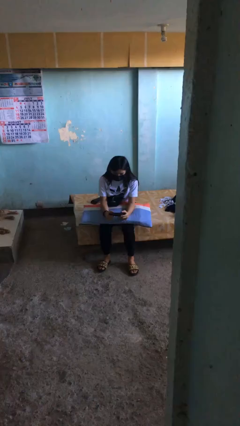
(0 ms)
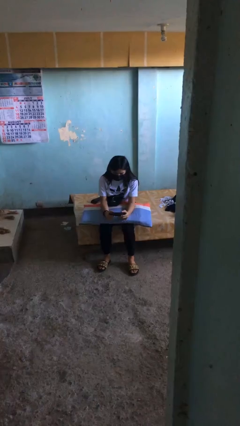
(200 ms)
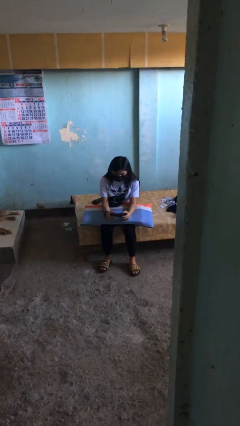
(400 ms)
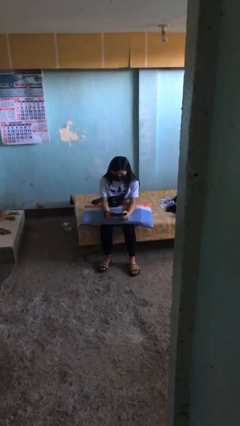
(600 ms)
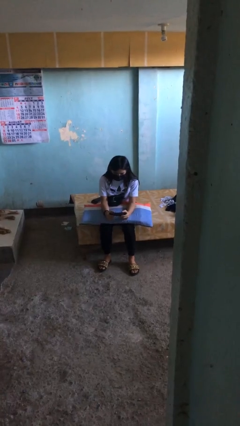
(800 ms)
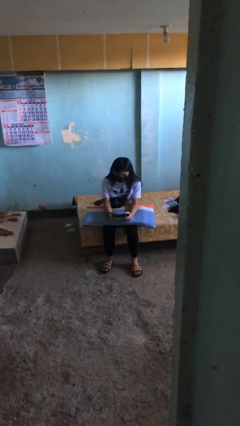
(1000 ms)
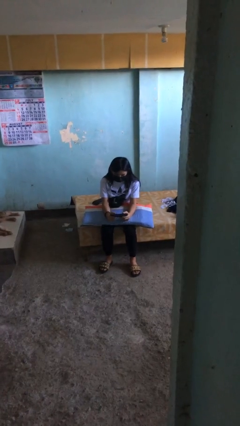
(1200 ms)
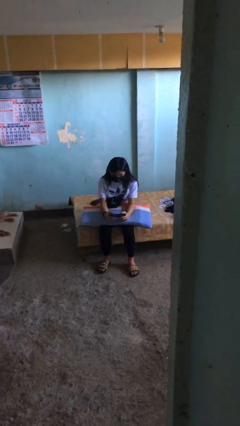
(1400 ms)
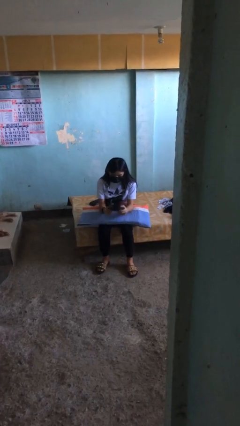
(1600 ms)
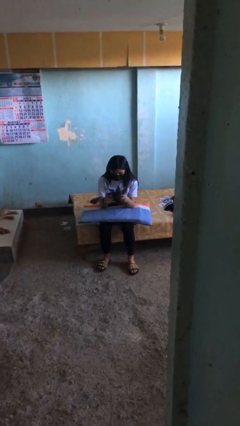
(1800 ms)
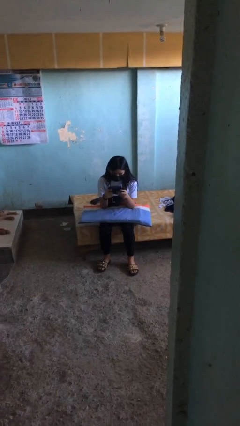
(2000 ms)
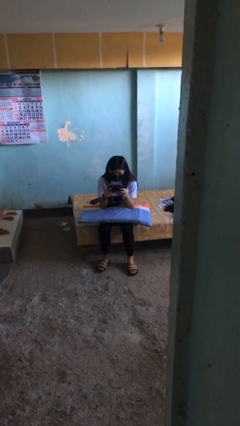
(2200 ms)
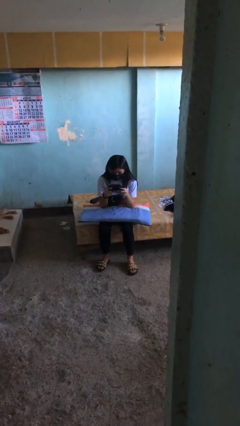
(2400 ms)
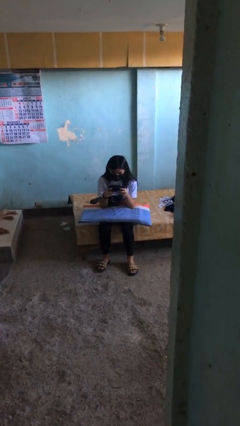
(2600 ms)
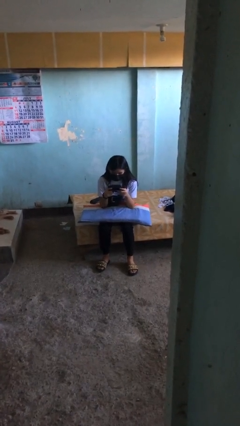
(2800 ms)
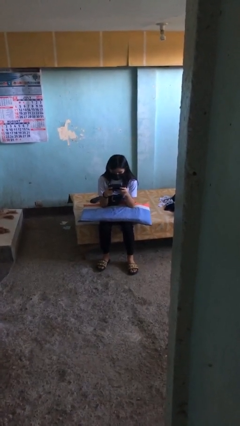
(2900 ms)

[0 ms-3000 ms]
person interacts with handheld game

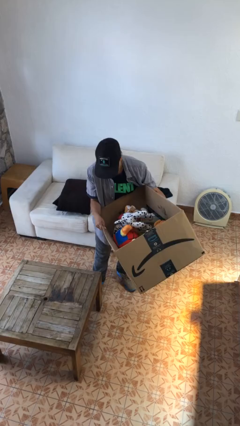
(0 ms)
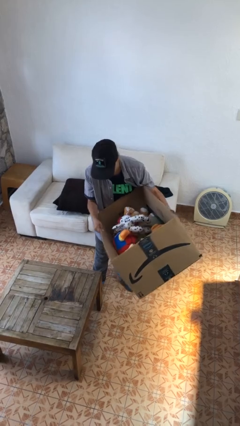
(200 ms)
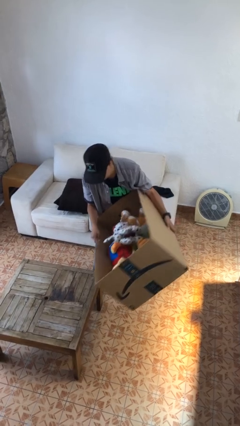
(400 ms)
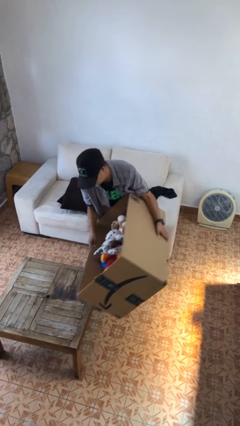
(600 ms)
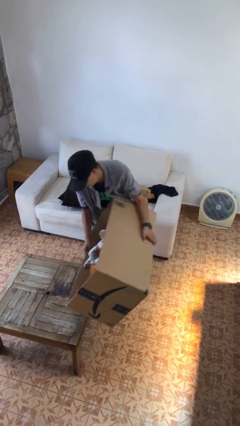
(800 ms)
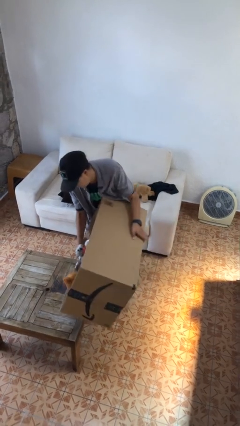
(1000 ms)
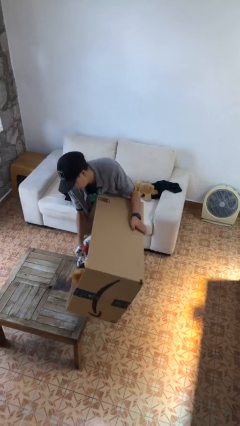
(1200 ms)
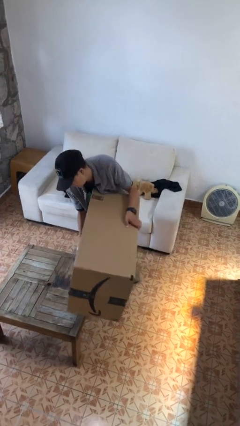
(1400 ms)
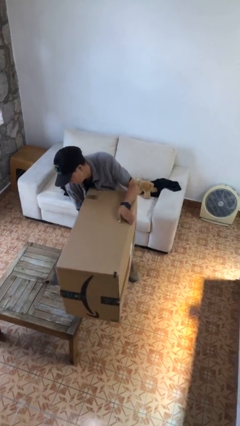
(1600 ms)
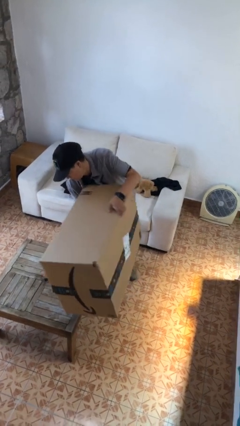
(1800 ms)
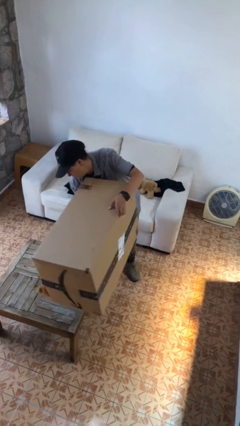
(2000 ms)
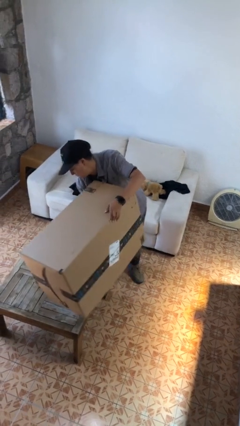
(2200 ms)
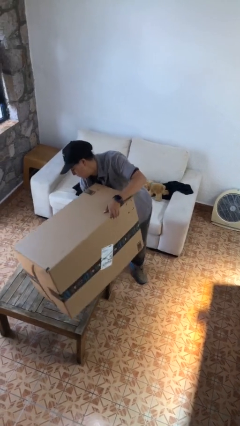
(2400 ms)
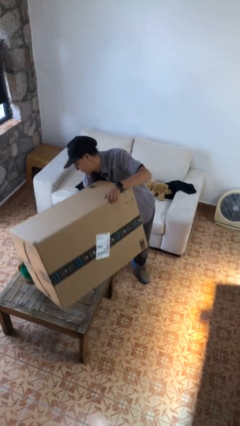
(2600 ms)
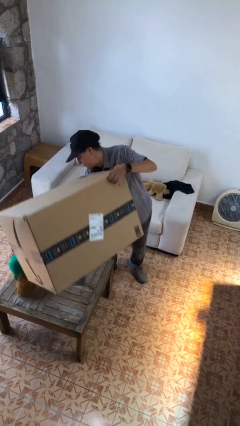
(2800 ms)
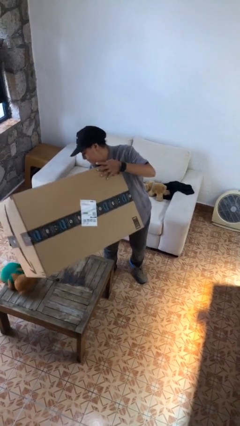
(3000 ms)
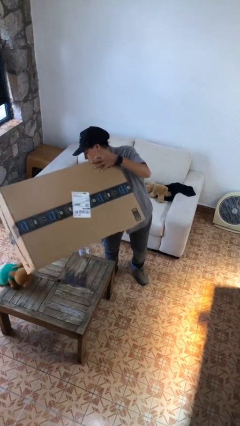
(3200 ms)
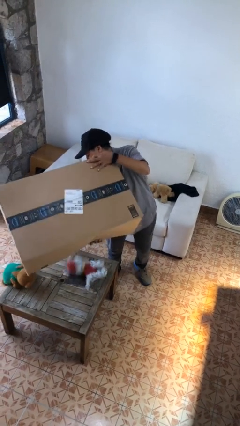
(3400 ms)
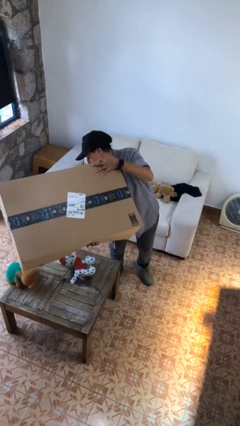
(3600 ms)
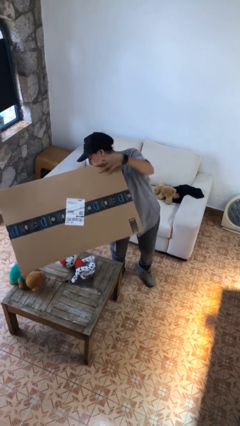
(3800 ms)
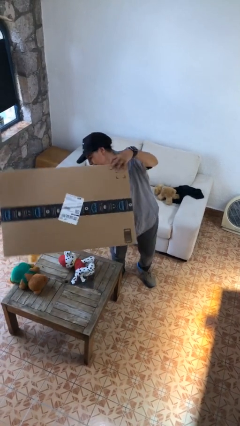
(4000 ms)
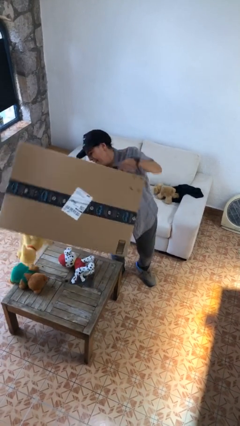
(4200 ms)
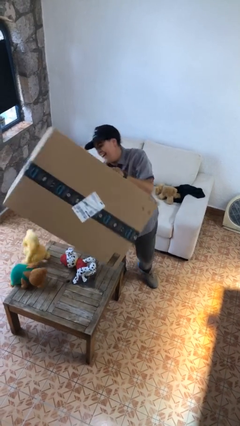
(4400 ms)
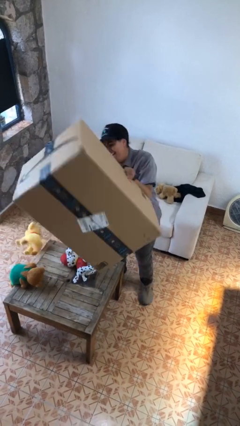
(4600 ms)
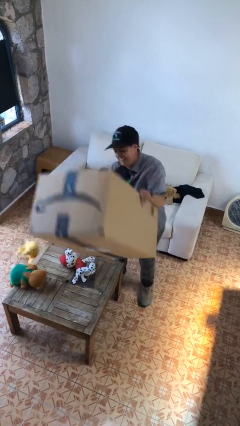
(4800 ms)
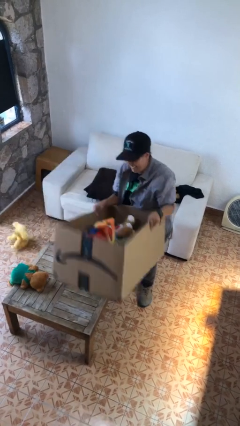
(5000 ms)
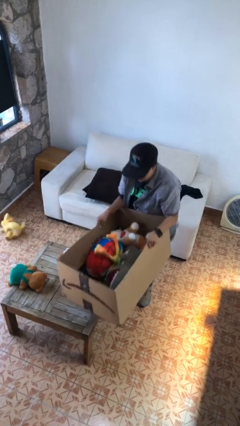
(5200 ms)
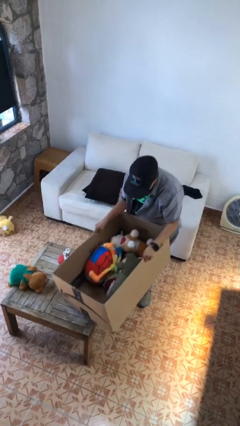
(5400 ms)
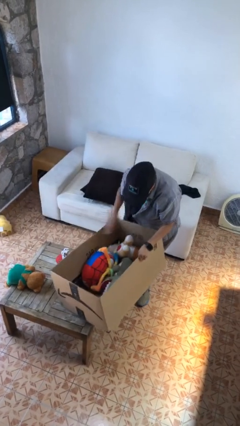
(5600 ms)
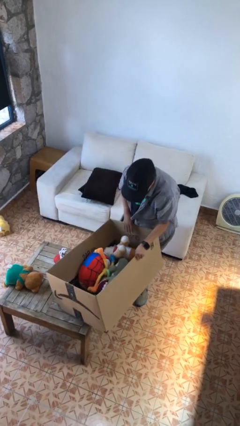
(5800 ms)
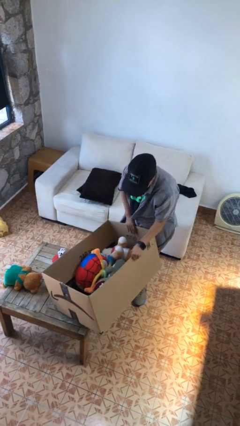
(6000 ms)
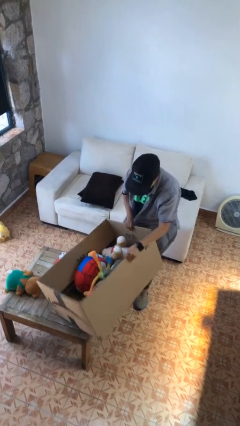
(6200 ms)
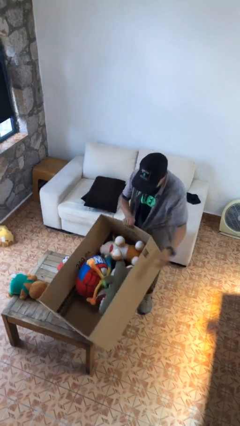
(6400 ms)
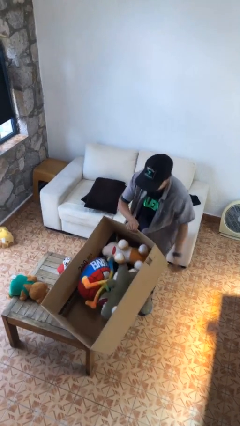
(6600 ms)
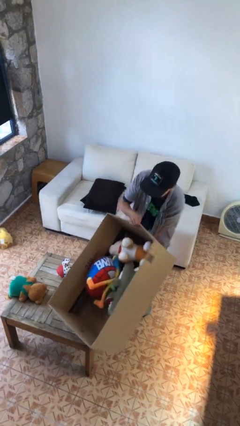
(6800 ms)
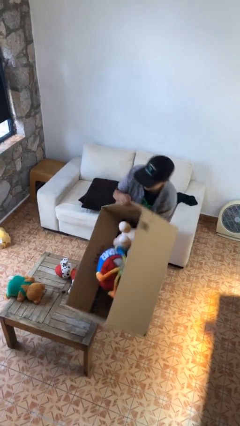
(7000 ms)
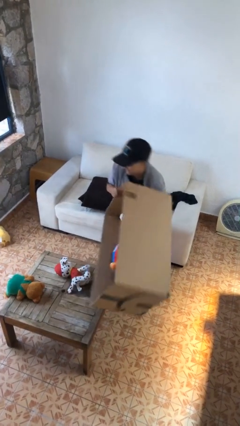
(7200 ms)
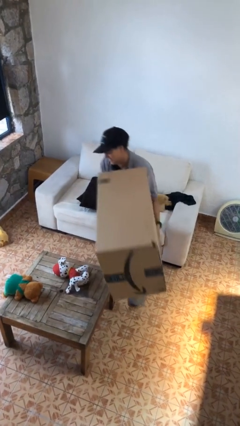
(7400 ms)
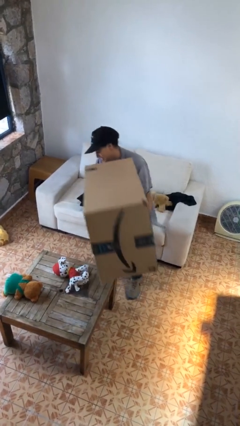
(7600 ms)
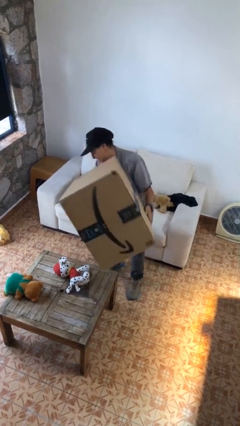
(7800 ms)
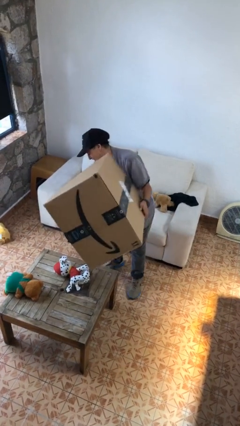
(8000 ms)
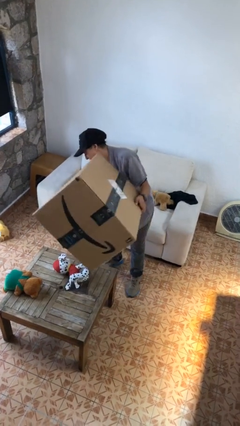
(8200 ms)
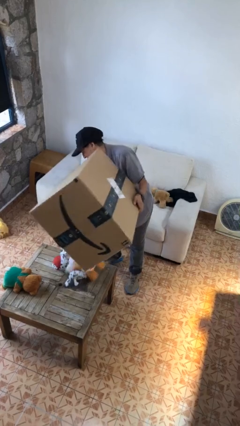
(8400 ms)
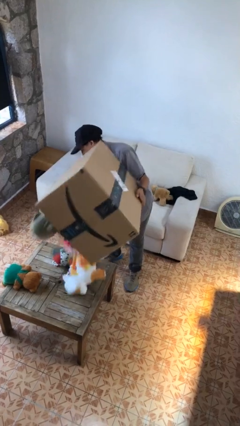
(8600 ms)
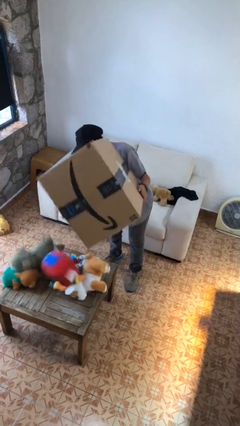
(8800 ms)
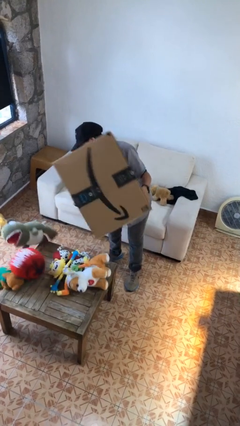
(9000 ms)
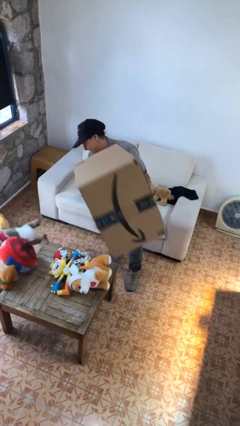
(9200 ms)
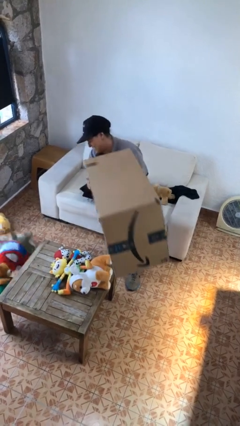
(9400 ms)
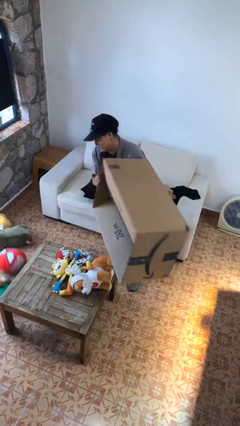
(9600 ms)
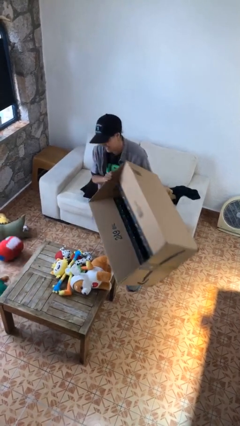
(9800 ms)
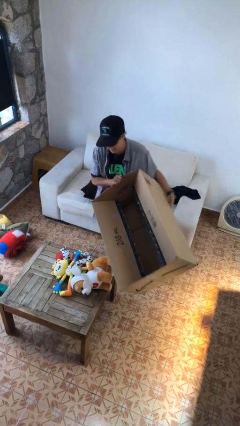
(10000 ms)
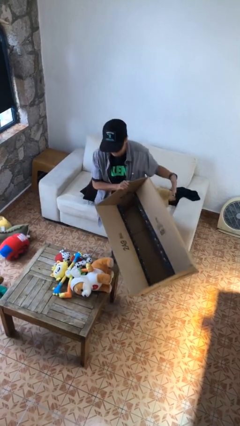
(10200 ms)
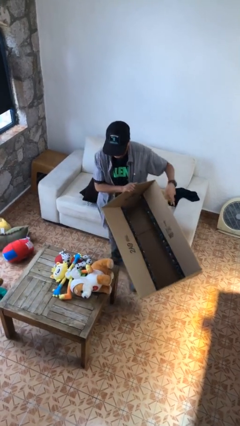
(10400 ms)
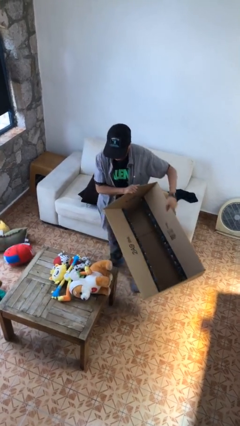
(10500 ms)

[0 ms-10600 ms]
person unloads box onto table

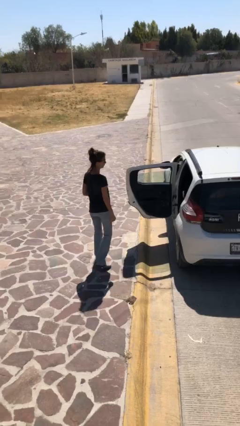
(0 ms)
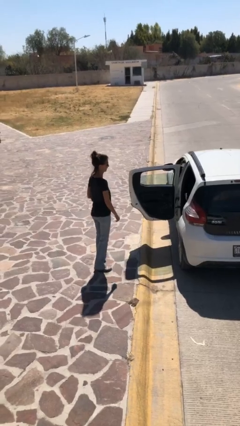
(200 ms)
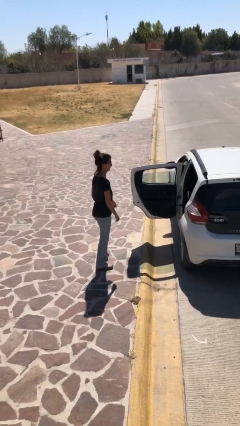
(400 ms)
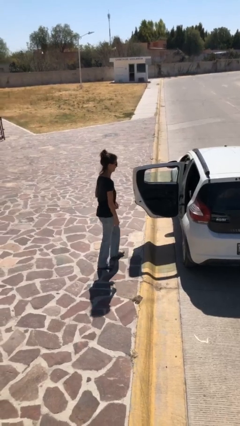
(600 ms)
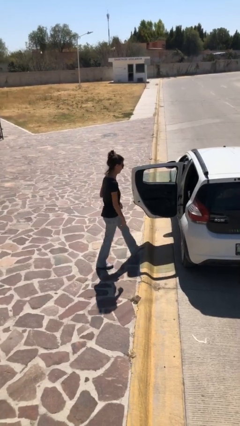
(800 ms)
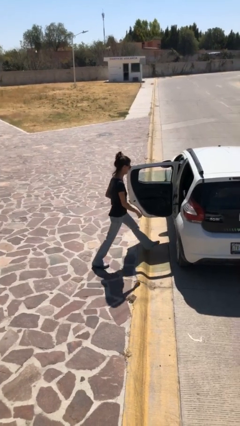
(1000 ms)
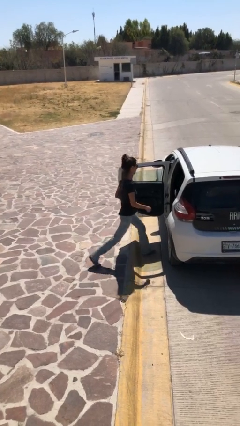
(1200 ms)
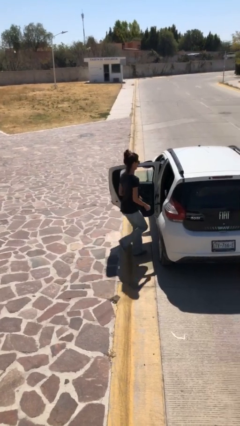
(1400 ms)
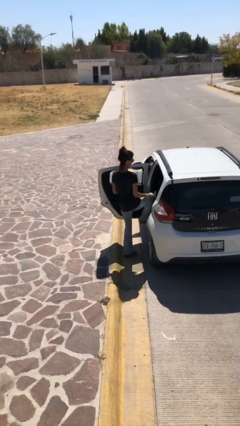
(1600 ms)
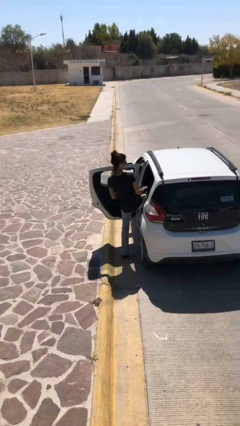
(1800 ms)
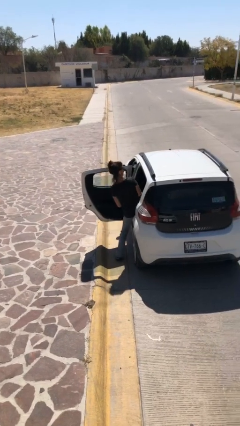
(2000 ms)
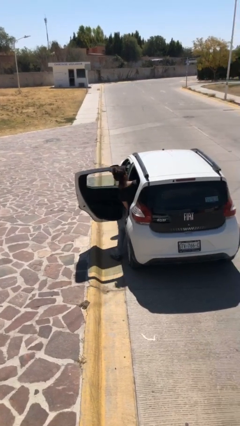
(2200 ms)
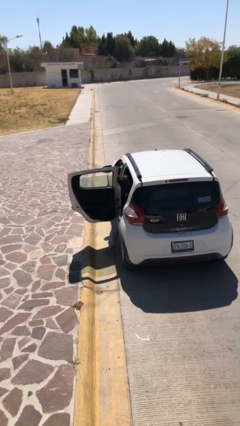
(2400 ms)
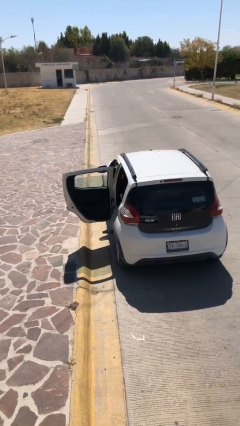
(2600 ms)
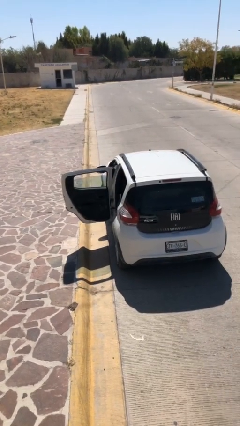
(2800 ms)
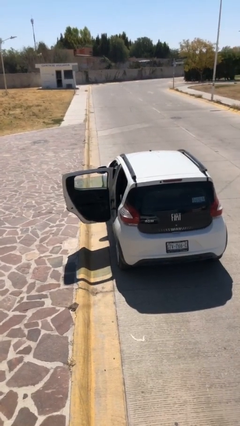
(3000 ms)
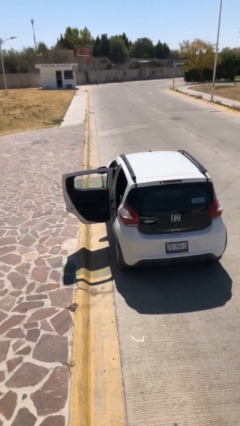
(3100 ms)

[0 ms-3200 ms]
person enters car

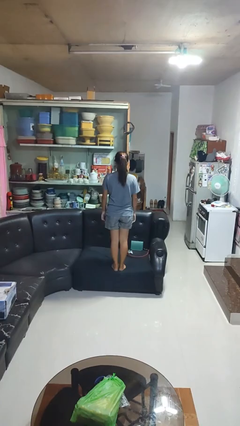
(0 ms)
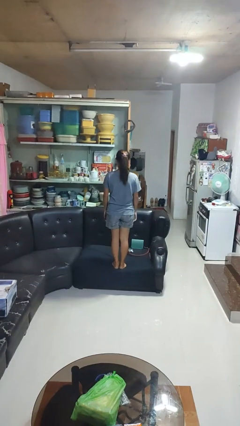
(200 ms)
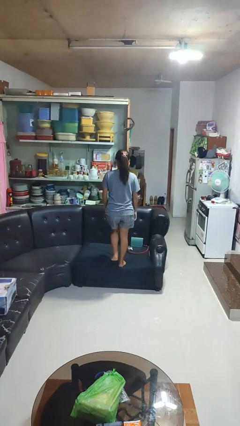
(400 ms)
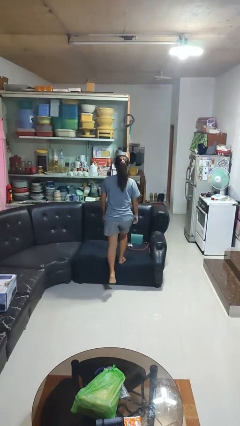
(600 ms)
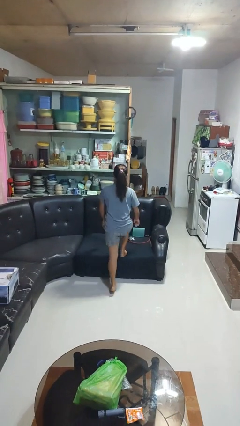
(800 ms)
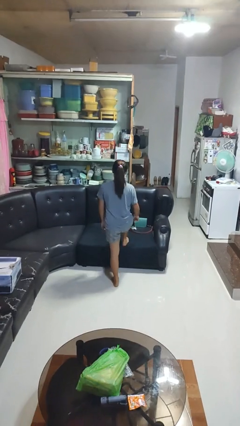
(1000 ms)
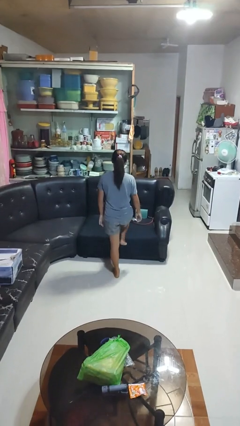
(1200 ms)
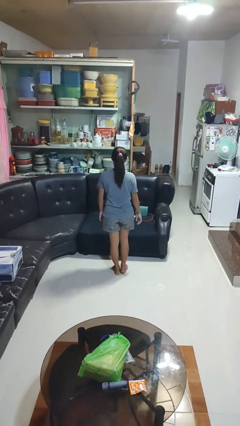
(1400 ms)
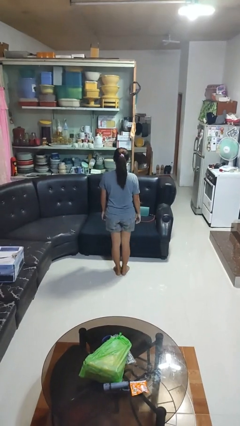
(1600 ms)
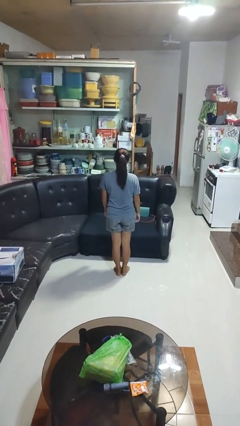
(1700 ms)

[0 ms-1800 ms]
person climbs off couch
